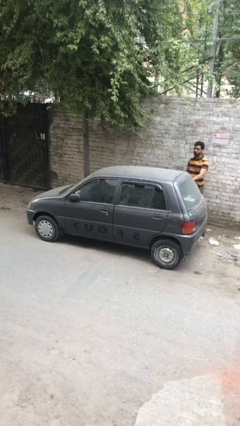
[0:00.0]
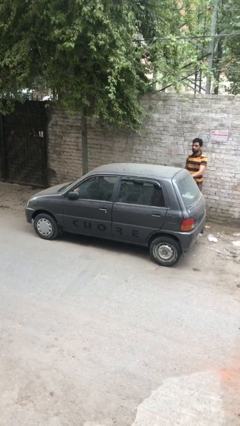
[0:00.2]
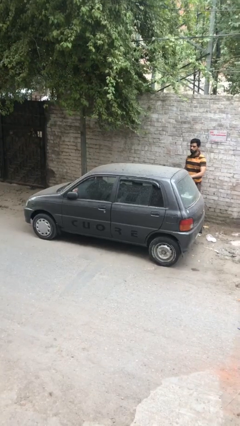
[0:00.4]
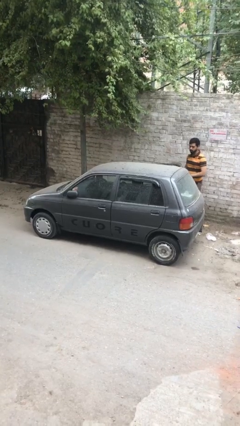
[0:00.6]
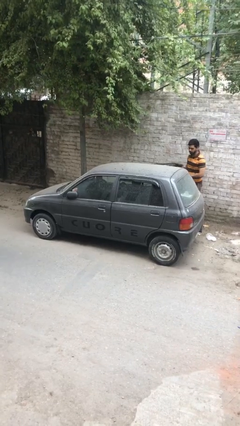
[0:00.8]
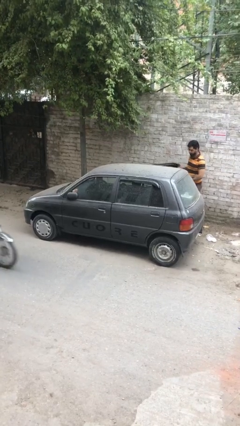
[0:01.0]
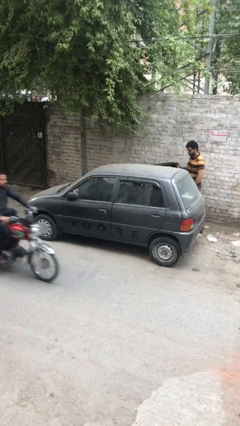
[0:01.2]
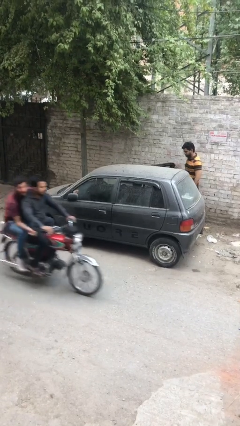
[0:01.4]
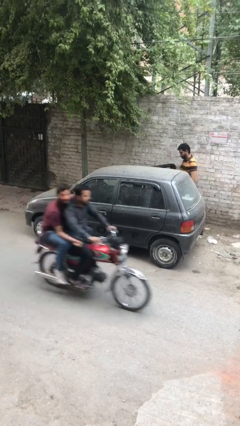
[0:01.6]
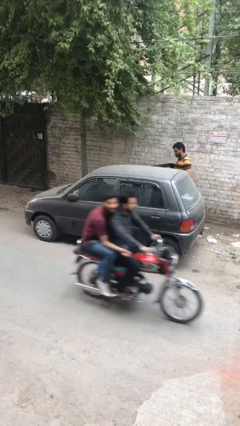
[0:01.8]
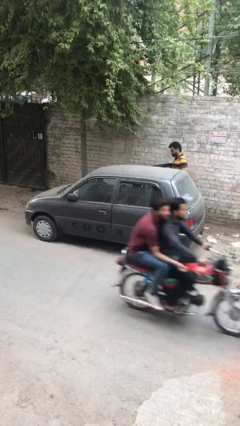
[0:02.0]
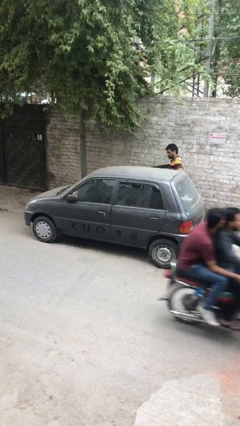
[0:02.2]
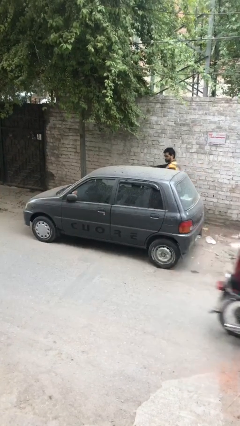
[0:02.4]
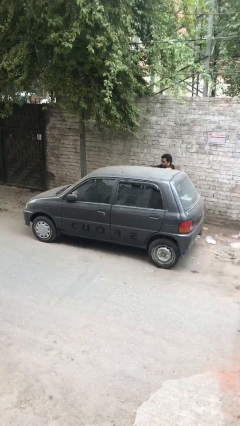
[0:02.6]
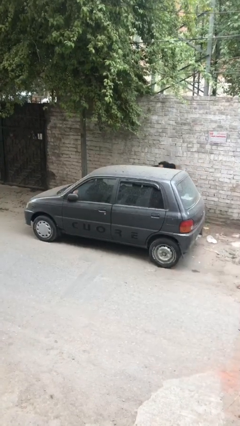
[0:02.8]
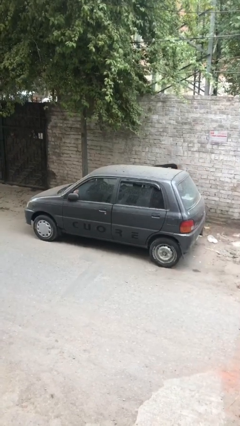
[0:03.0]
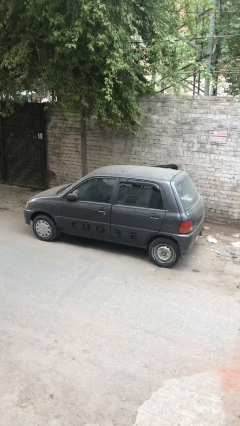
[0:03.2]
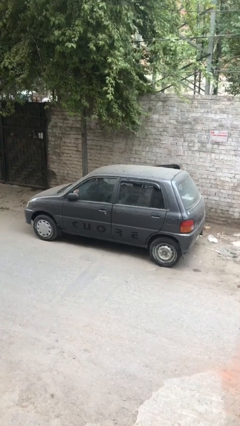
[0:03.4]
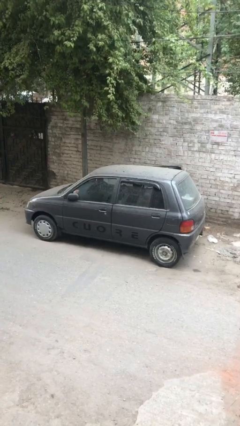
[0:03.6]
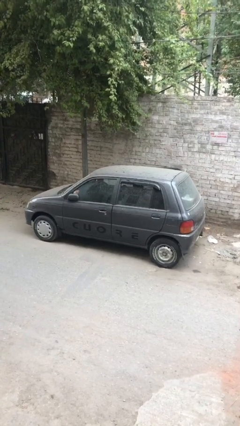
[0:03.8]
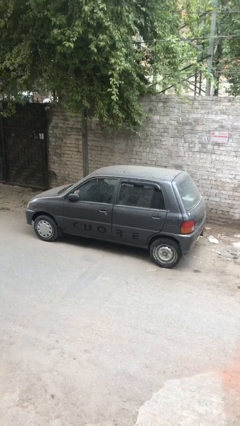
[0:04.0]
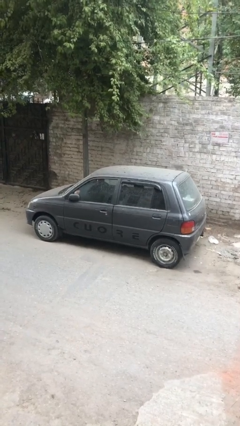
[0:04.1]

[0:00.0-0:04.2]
car picks up person

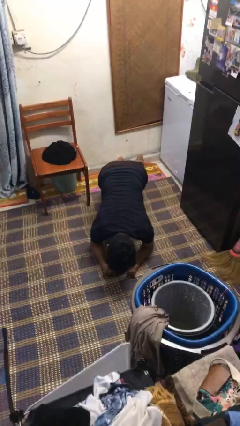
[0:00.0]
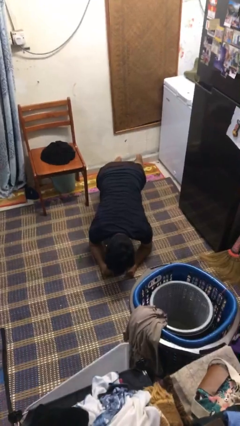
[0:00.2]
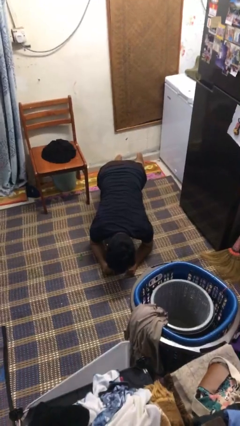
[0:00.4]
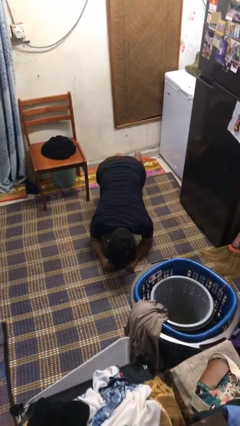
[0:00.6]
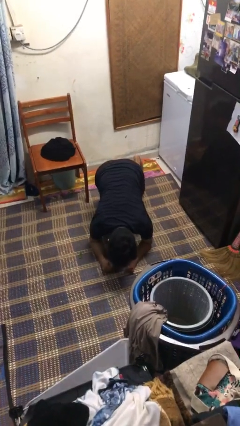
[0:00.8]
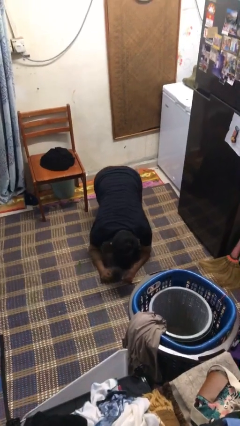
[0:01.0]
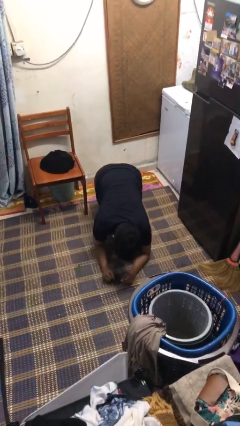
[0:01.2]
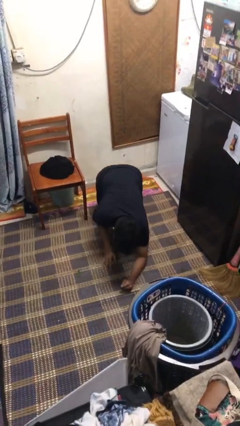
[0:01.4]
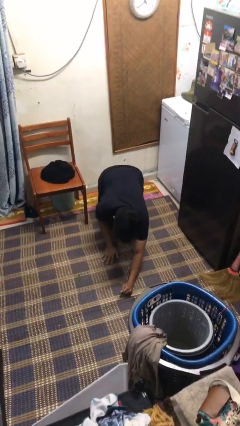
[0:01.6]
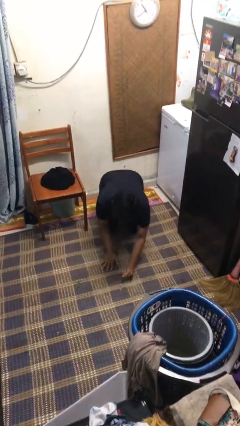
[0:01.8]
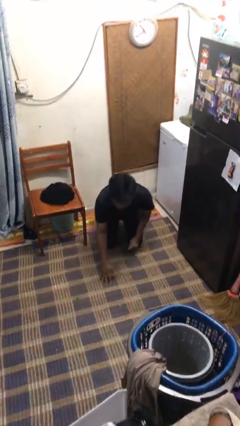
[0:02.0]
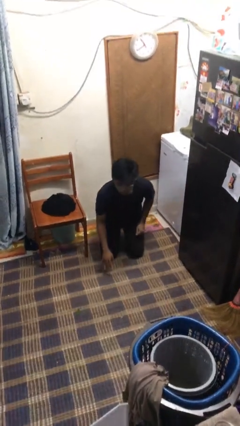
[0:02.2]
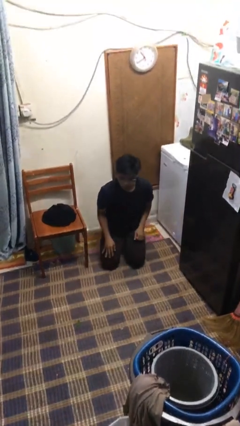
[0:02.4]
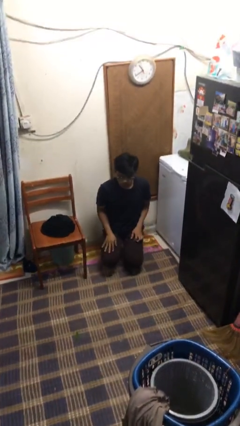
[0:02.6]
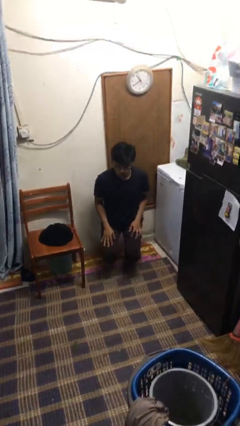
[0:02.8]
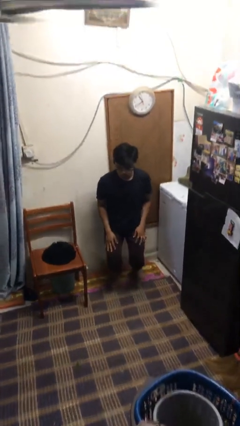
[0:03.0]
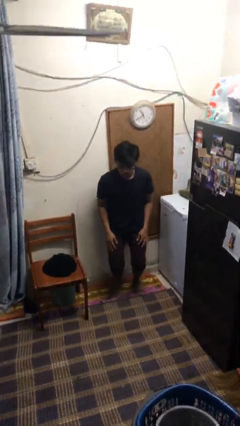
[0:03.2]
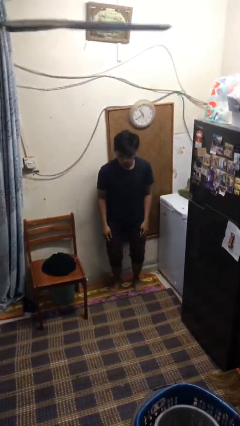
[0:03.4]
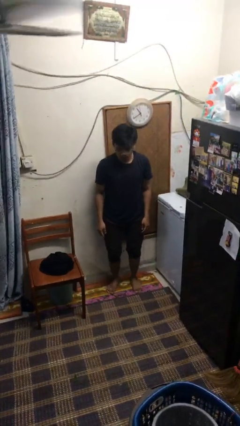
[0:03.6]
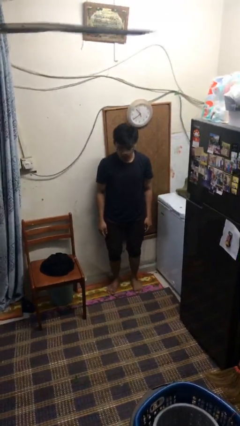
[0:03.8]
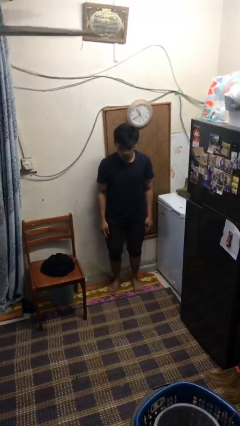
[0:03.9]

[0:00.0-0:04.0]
person stands up from floor

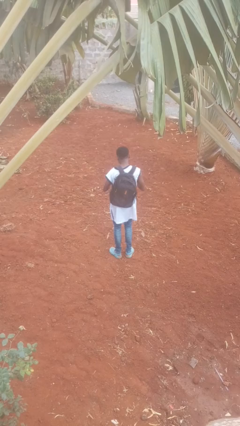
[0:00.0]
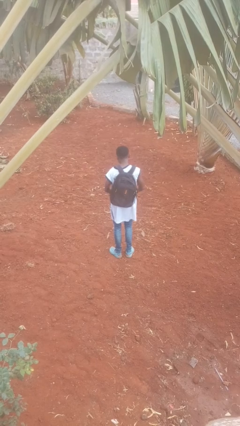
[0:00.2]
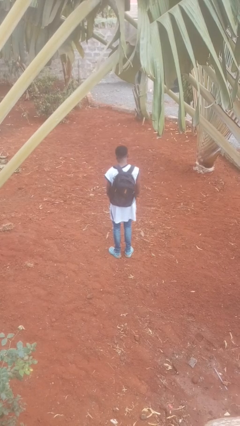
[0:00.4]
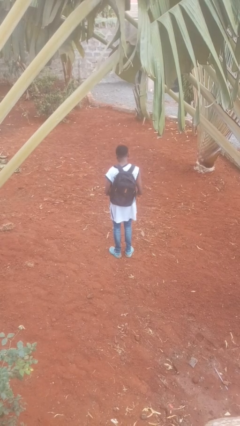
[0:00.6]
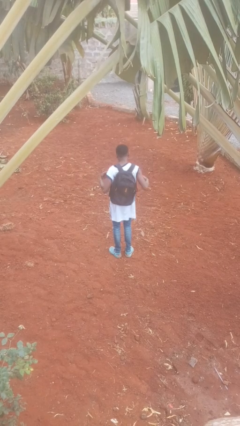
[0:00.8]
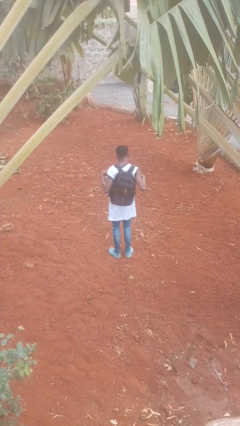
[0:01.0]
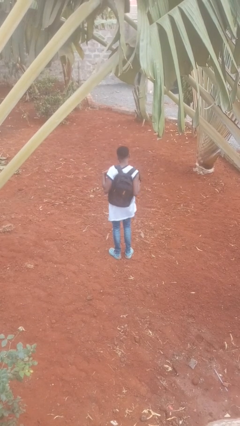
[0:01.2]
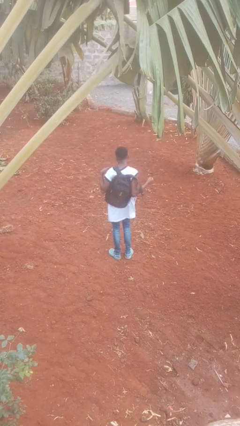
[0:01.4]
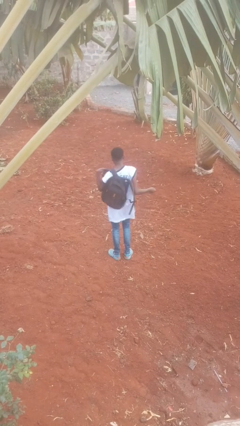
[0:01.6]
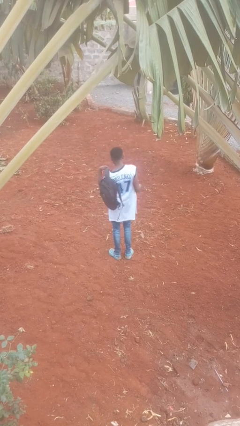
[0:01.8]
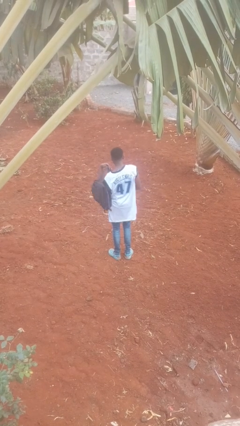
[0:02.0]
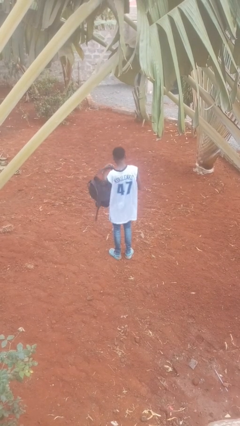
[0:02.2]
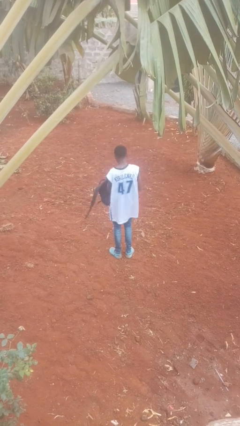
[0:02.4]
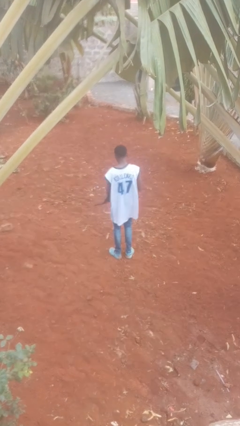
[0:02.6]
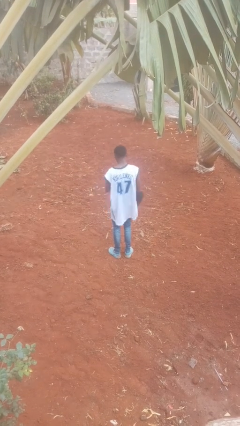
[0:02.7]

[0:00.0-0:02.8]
person takes off backpack

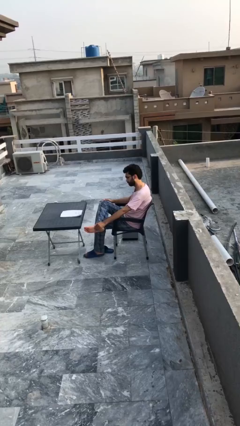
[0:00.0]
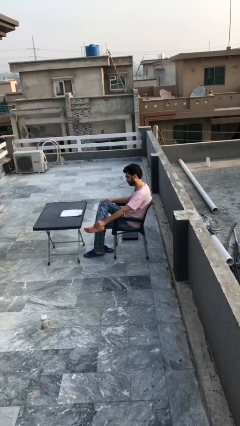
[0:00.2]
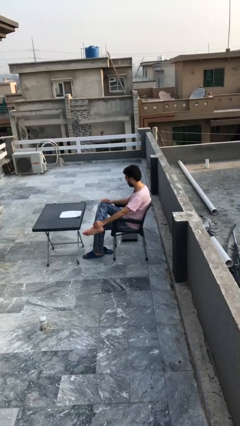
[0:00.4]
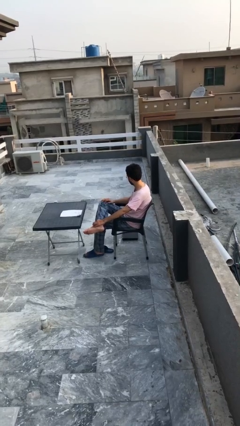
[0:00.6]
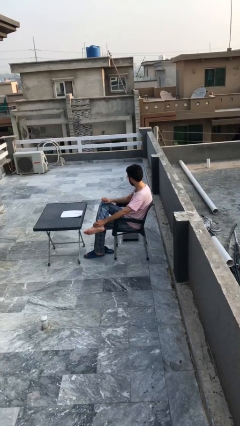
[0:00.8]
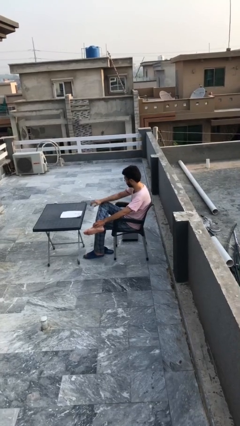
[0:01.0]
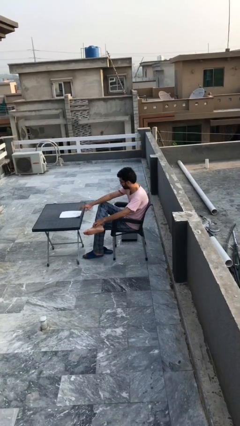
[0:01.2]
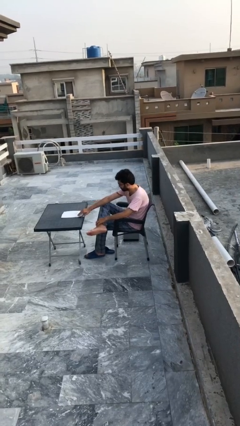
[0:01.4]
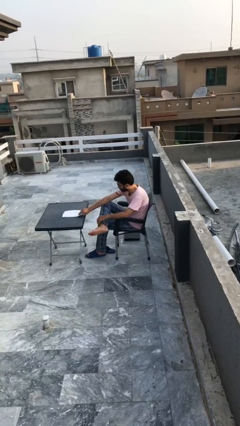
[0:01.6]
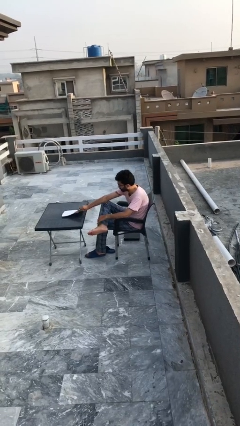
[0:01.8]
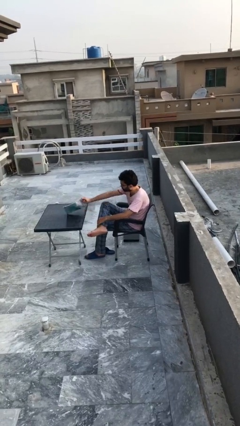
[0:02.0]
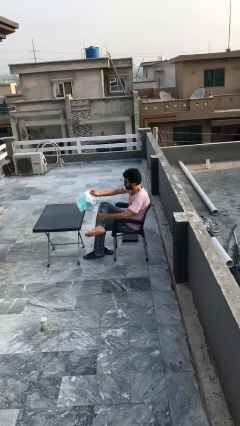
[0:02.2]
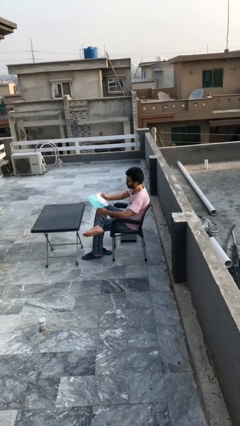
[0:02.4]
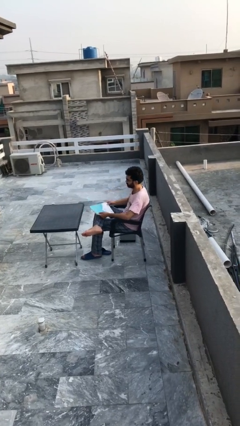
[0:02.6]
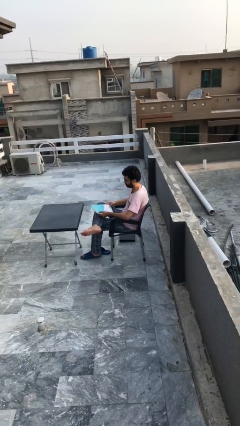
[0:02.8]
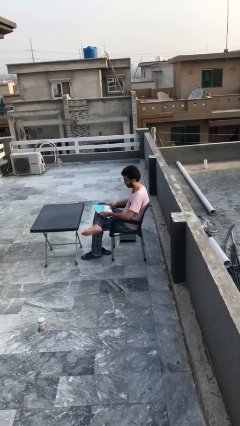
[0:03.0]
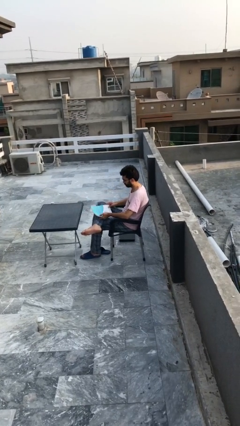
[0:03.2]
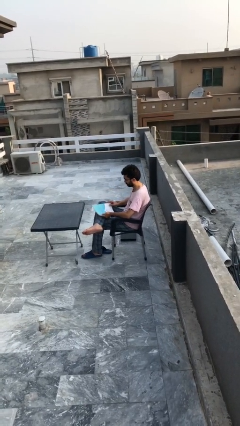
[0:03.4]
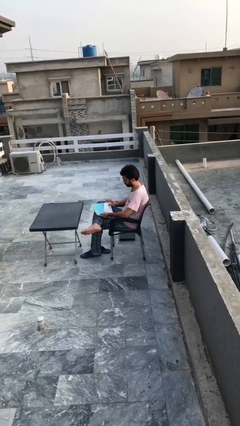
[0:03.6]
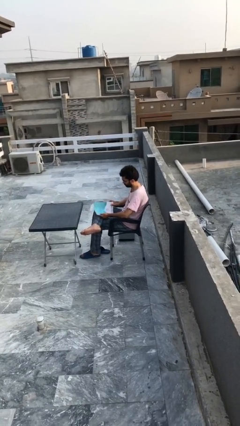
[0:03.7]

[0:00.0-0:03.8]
person picks up object from table

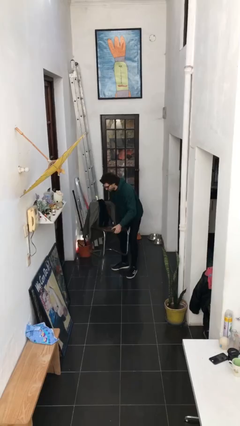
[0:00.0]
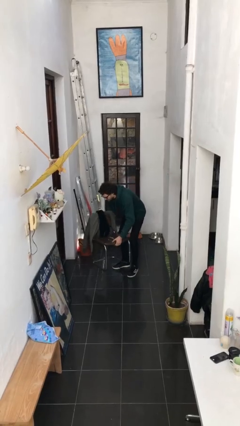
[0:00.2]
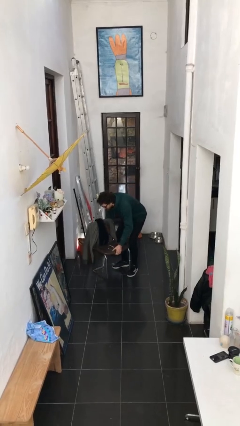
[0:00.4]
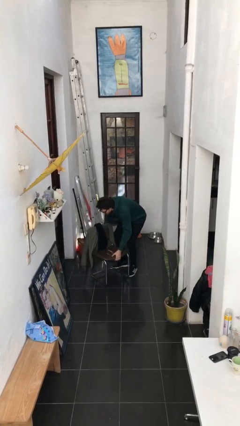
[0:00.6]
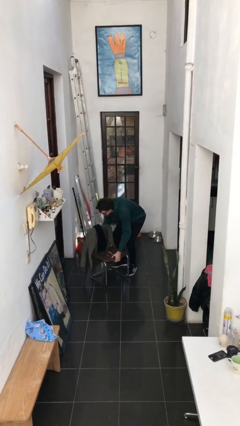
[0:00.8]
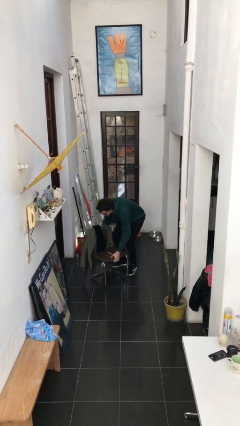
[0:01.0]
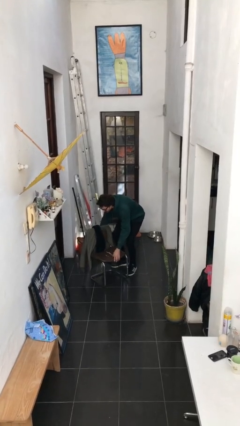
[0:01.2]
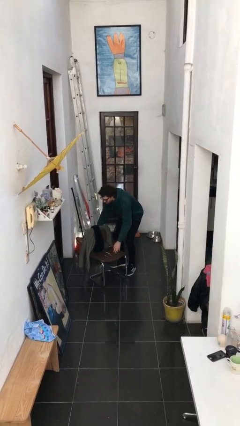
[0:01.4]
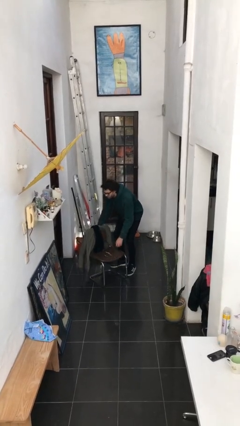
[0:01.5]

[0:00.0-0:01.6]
person puts down object on floor

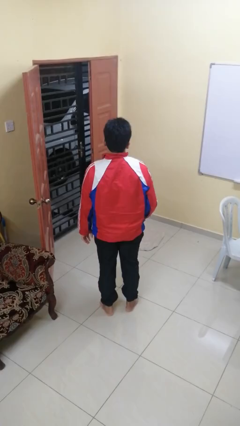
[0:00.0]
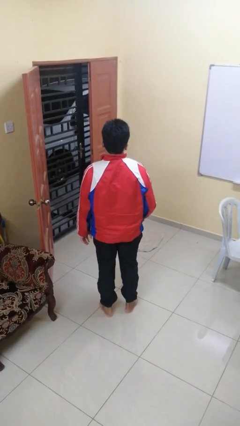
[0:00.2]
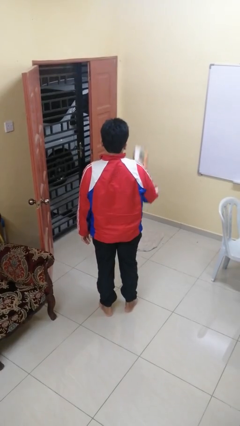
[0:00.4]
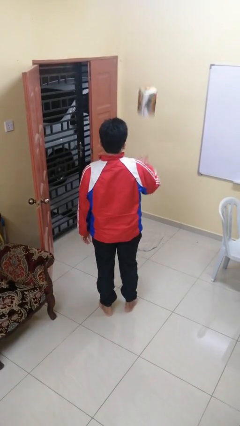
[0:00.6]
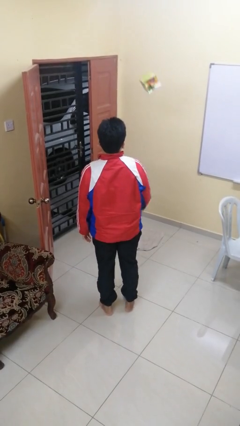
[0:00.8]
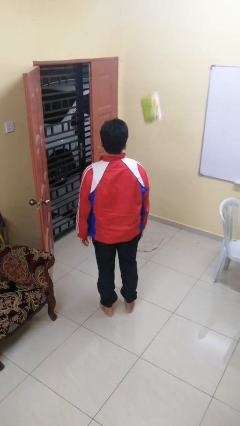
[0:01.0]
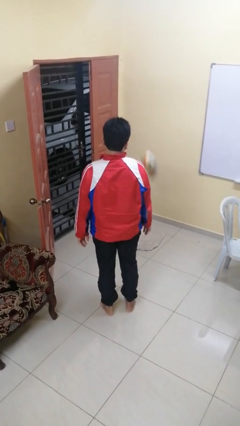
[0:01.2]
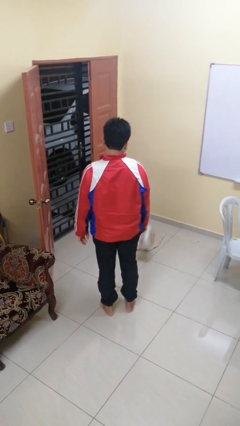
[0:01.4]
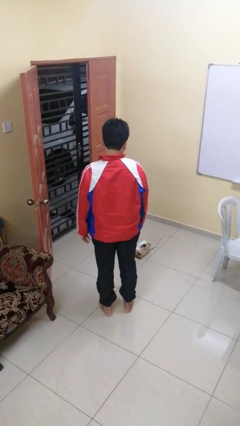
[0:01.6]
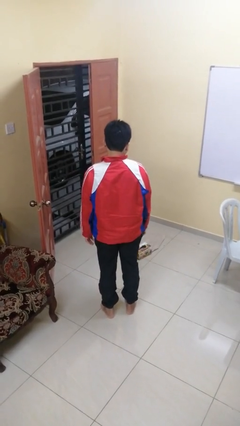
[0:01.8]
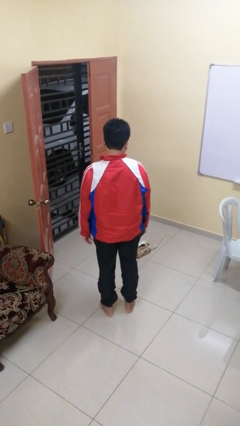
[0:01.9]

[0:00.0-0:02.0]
person throws object into air
